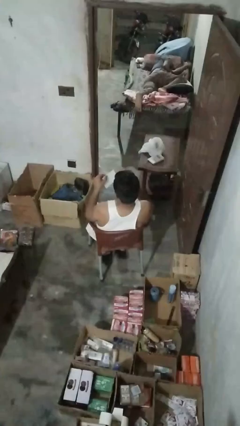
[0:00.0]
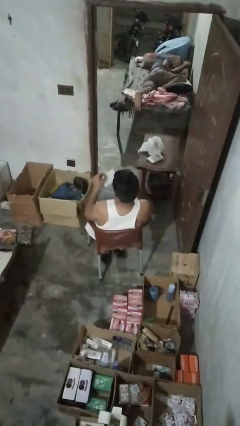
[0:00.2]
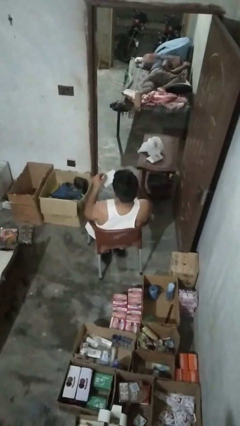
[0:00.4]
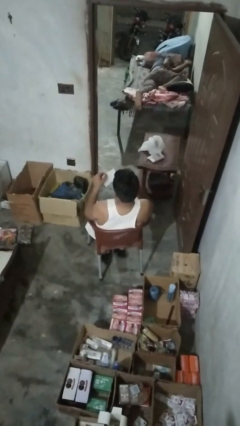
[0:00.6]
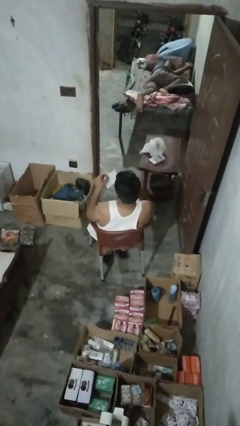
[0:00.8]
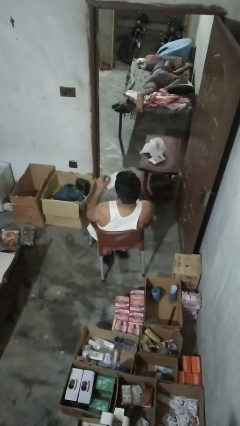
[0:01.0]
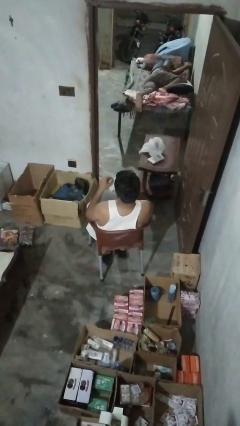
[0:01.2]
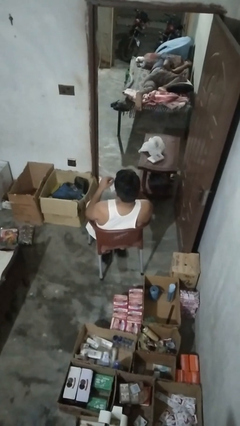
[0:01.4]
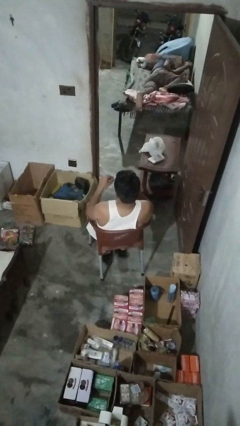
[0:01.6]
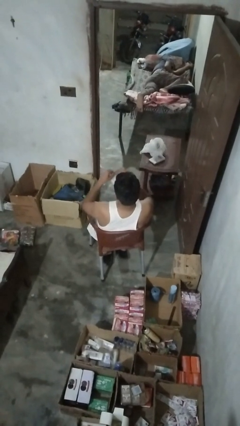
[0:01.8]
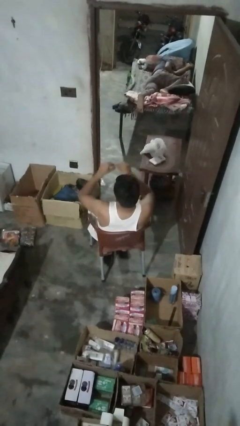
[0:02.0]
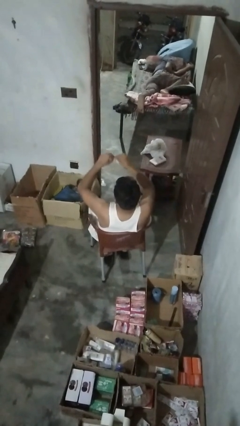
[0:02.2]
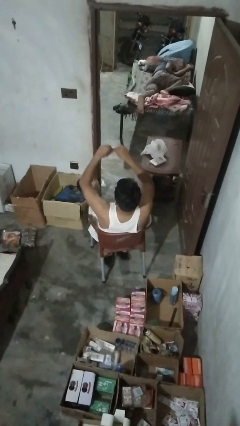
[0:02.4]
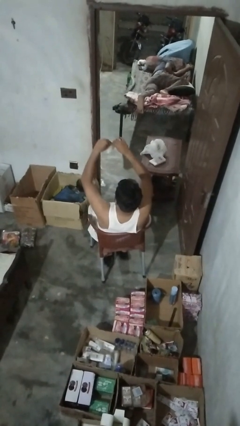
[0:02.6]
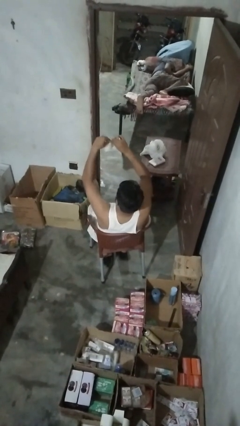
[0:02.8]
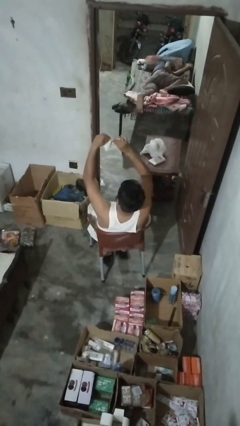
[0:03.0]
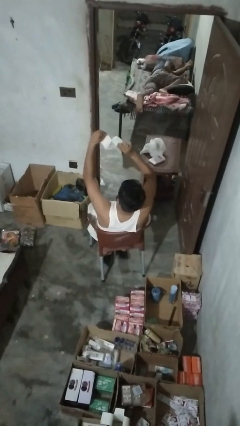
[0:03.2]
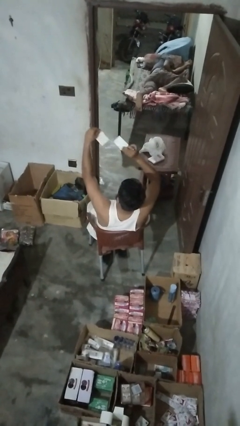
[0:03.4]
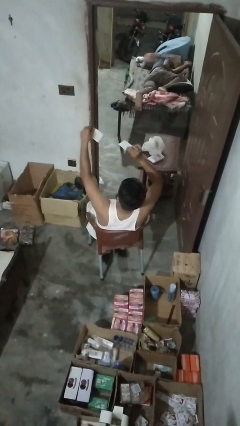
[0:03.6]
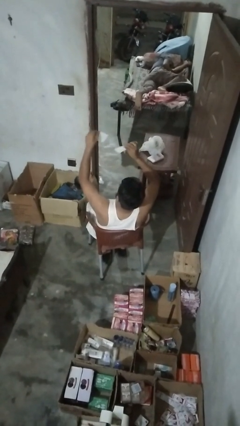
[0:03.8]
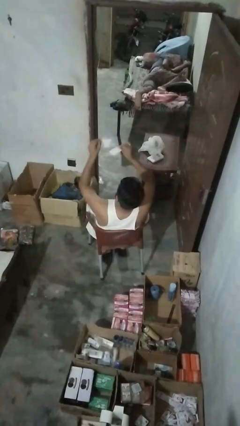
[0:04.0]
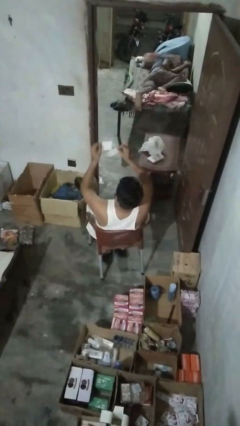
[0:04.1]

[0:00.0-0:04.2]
person tears paper

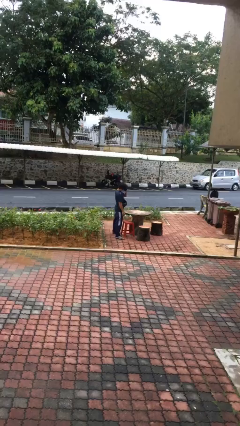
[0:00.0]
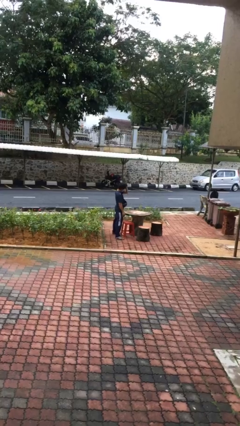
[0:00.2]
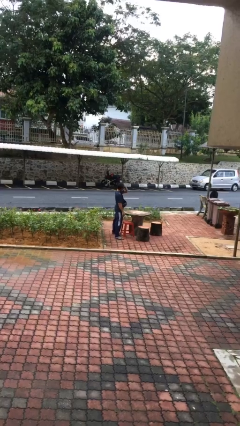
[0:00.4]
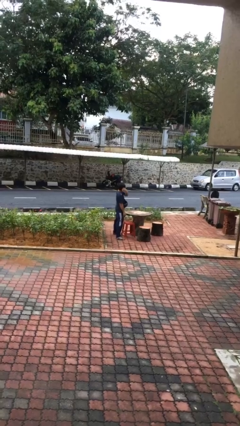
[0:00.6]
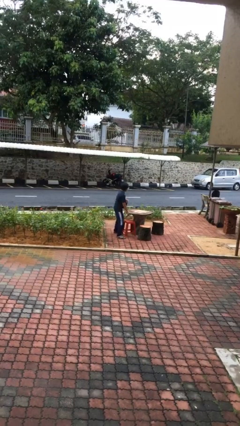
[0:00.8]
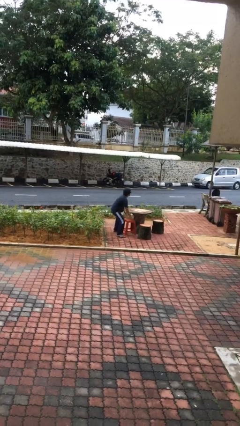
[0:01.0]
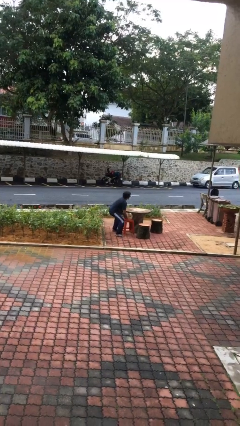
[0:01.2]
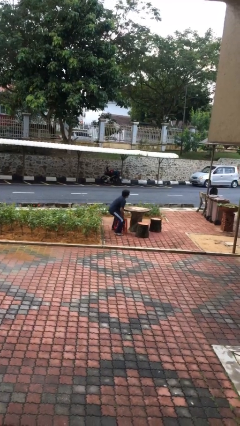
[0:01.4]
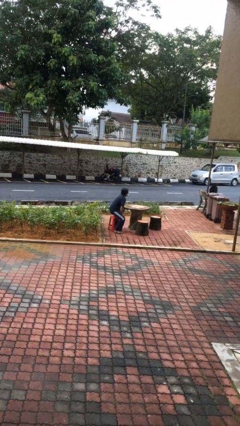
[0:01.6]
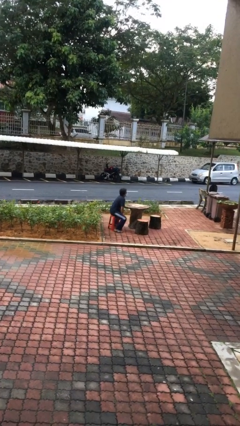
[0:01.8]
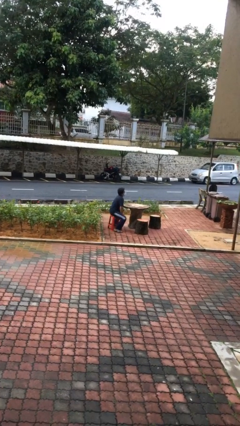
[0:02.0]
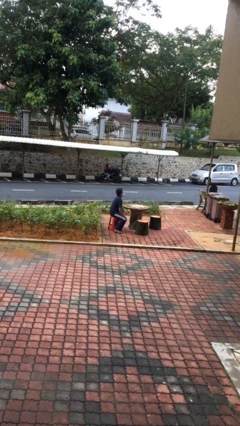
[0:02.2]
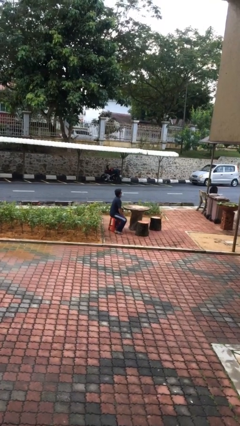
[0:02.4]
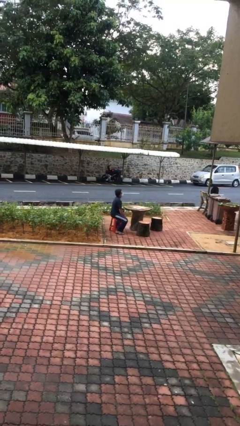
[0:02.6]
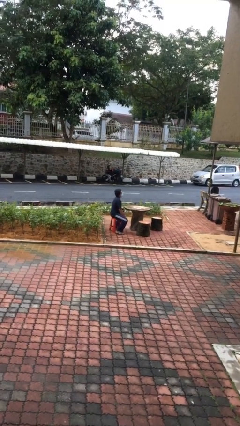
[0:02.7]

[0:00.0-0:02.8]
person sits down

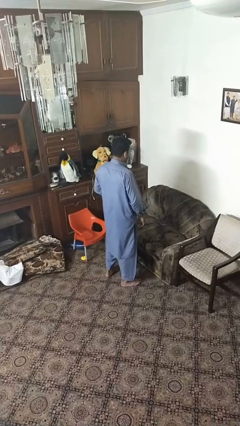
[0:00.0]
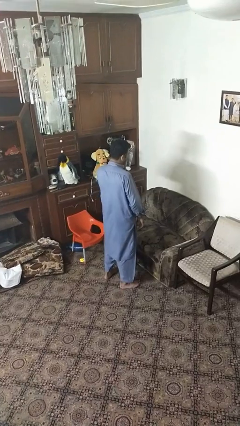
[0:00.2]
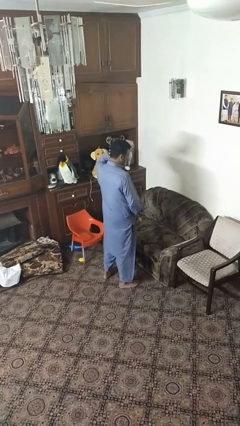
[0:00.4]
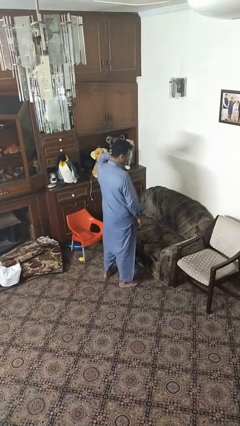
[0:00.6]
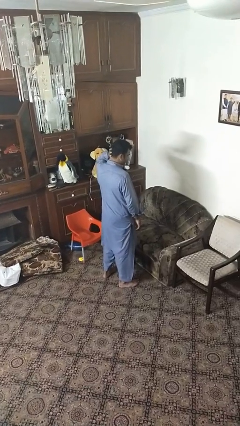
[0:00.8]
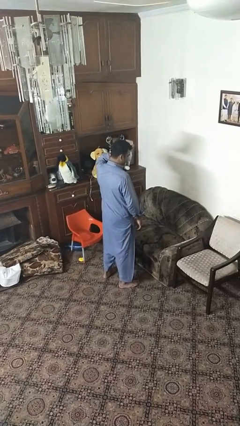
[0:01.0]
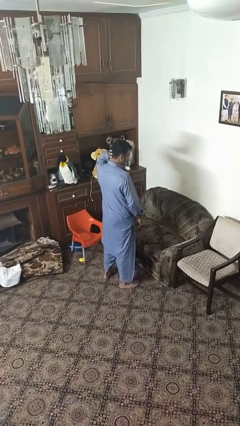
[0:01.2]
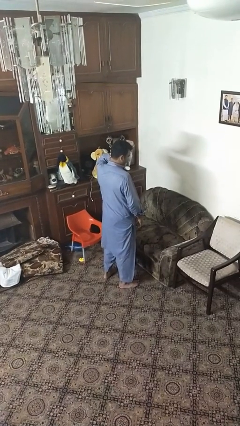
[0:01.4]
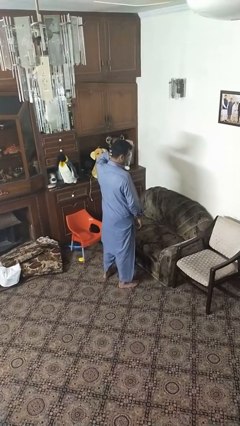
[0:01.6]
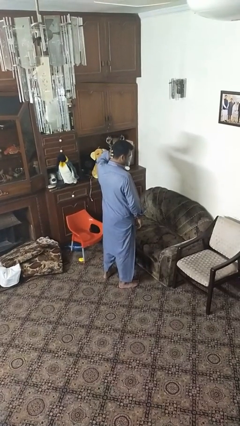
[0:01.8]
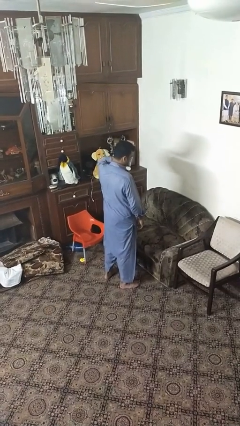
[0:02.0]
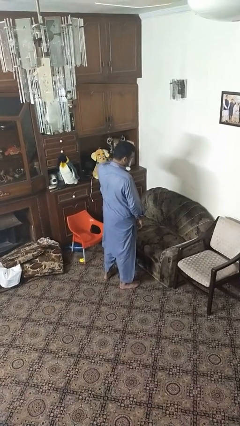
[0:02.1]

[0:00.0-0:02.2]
person strokes hair

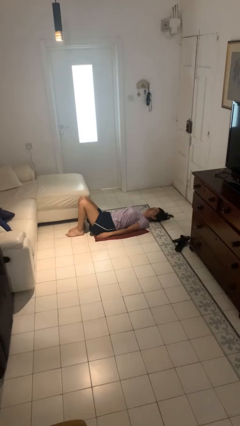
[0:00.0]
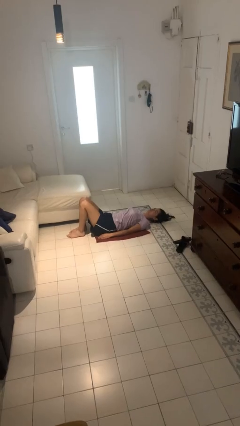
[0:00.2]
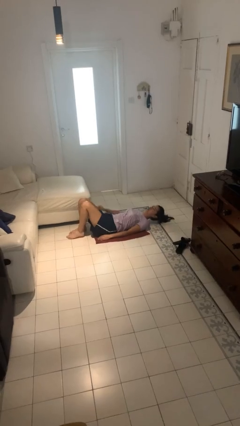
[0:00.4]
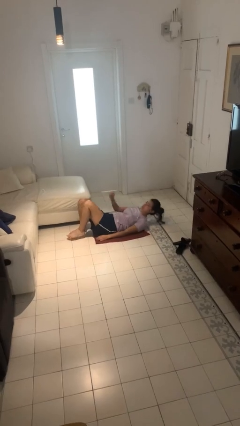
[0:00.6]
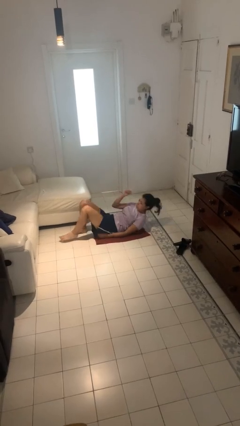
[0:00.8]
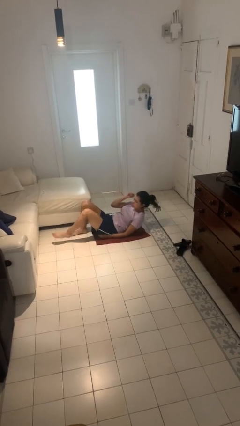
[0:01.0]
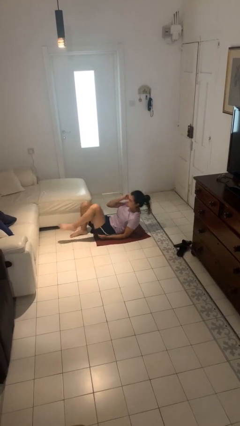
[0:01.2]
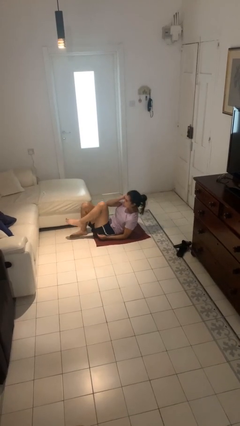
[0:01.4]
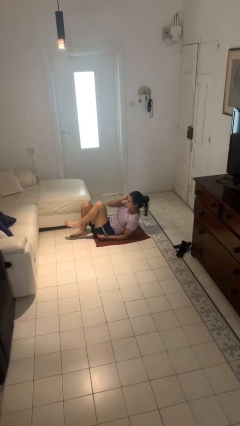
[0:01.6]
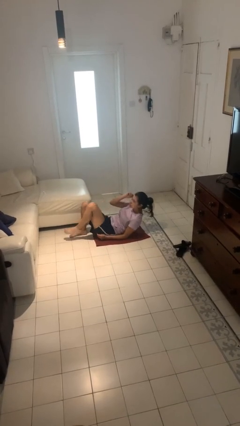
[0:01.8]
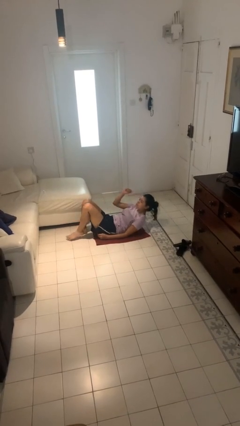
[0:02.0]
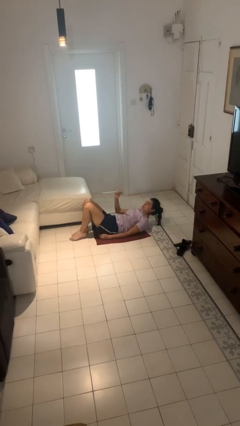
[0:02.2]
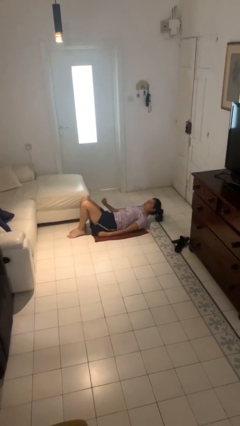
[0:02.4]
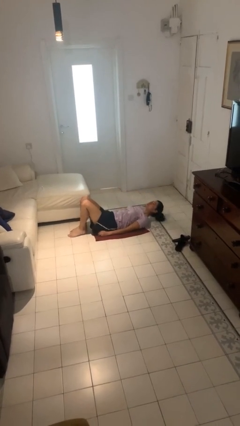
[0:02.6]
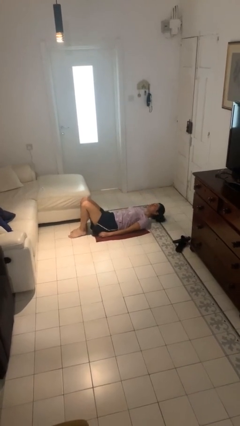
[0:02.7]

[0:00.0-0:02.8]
person exercises with situp

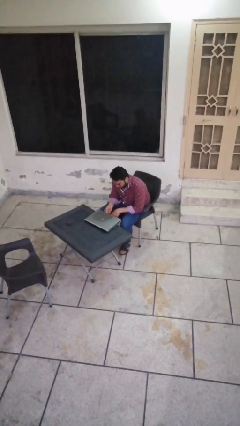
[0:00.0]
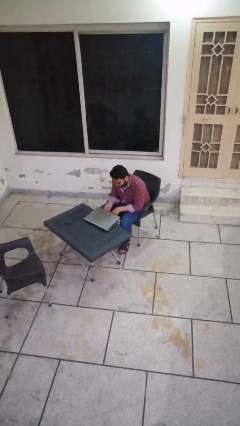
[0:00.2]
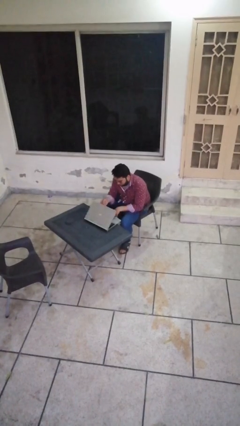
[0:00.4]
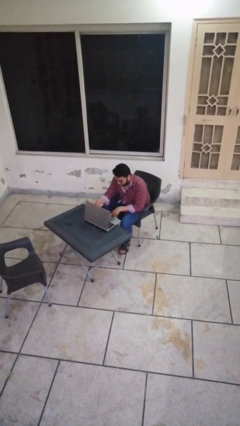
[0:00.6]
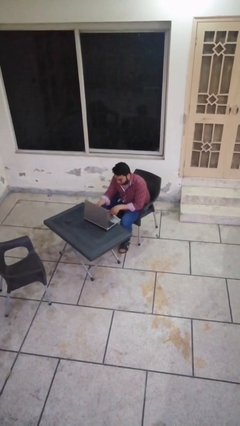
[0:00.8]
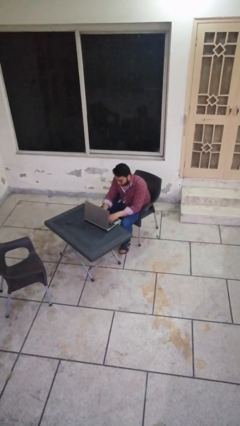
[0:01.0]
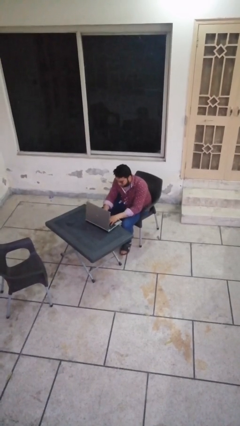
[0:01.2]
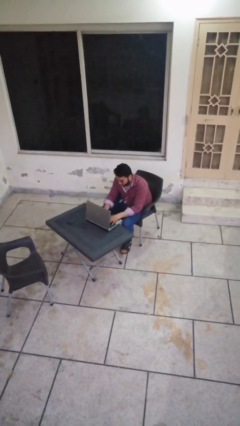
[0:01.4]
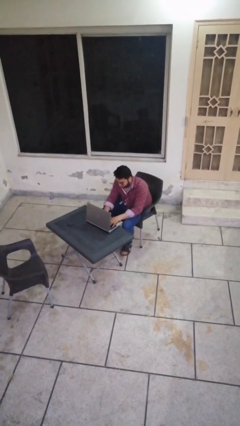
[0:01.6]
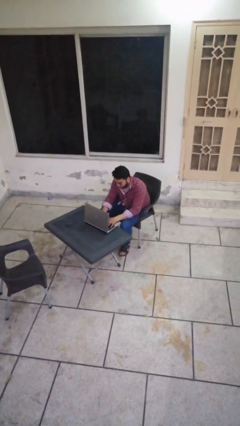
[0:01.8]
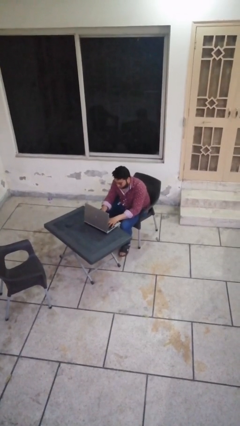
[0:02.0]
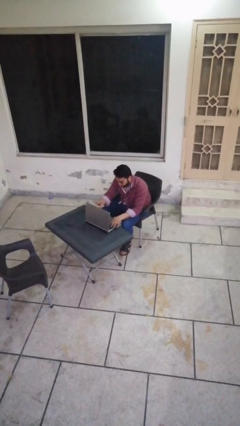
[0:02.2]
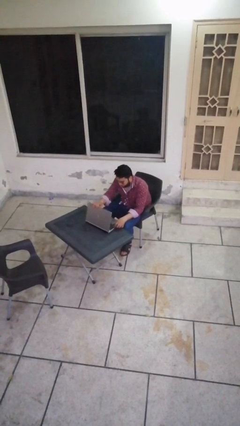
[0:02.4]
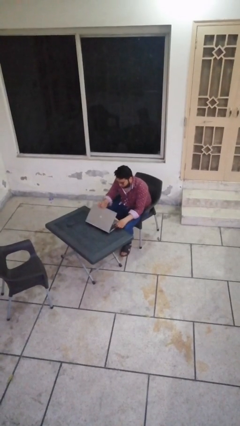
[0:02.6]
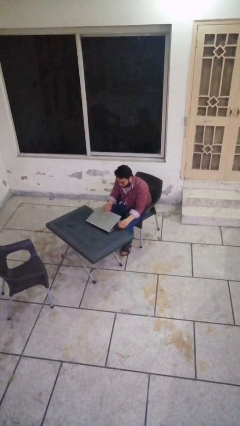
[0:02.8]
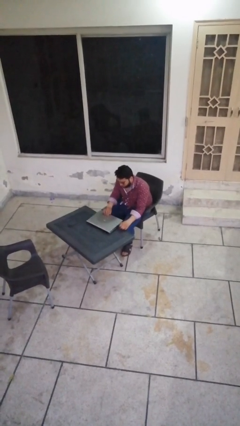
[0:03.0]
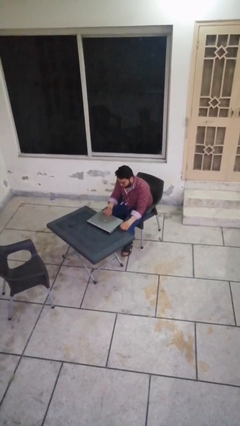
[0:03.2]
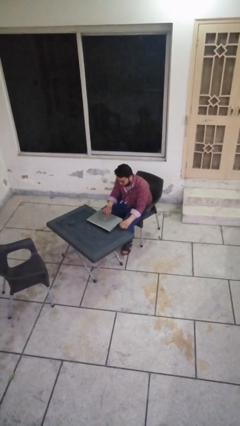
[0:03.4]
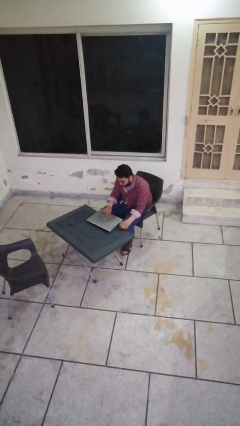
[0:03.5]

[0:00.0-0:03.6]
person interacts with laptop

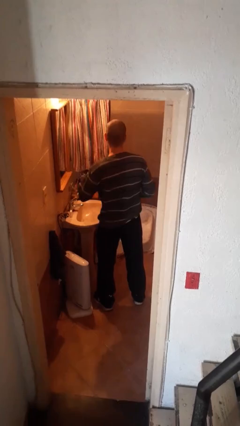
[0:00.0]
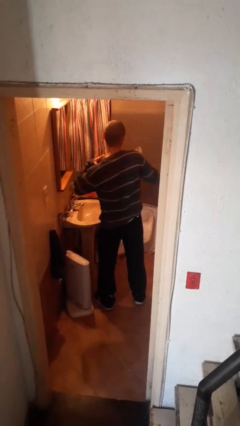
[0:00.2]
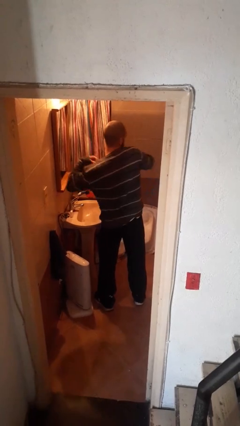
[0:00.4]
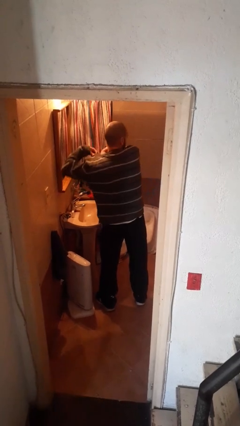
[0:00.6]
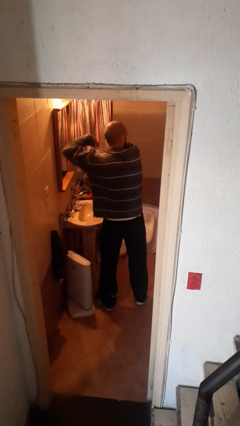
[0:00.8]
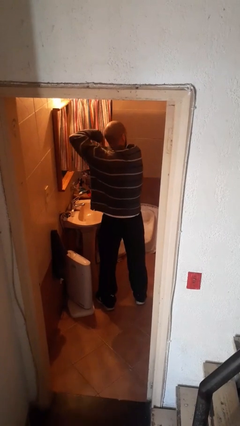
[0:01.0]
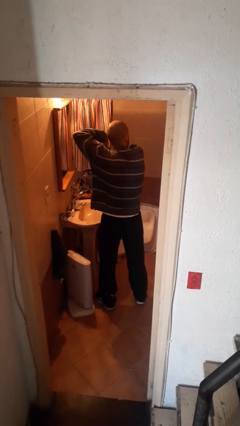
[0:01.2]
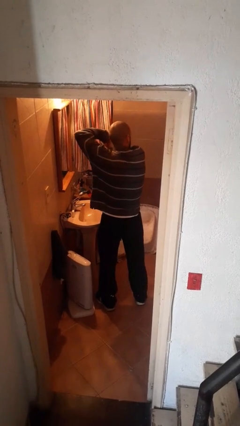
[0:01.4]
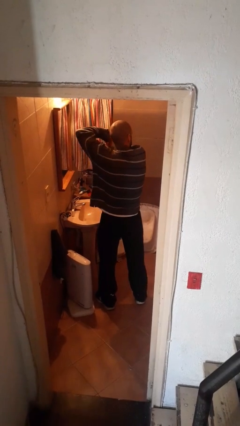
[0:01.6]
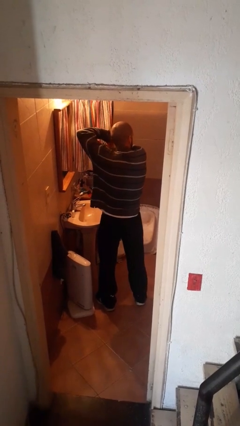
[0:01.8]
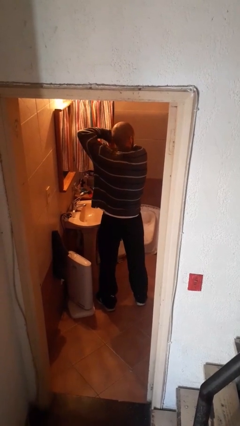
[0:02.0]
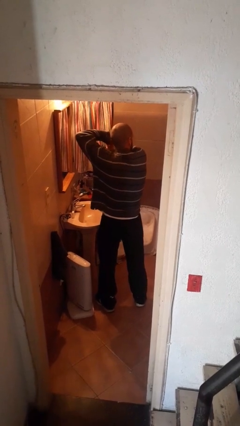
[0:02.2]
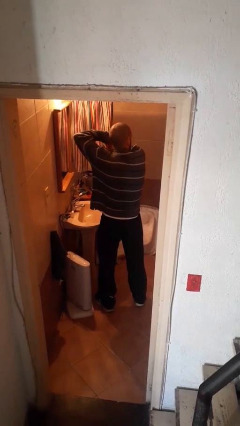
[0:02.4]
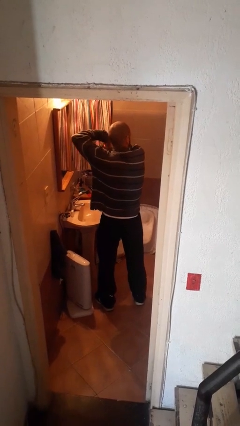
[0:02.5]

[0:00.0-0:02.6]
person applies deodorant
